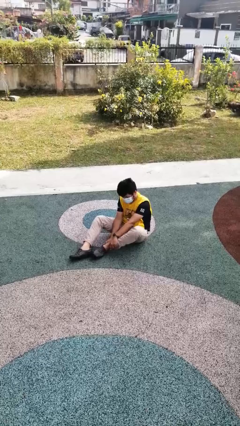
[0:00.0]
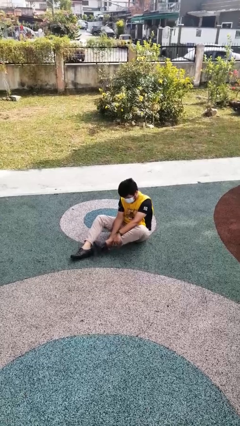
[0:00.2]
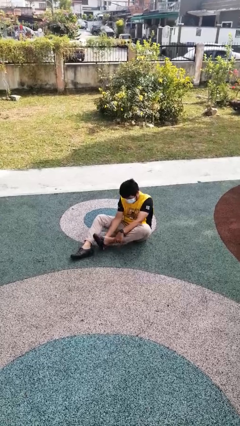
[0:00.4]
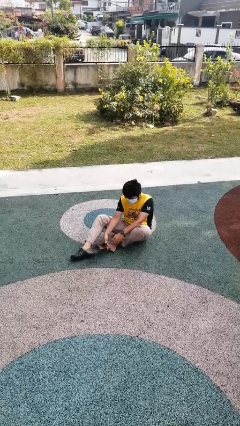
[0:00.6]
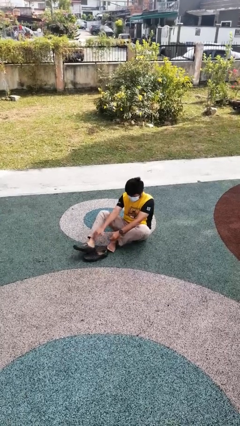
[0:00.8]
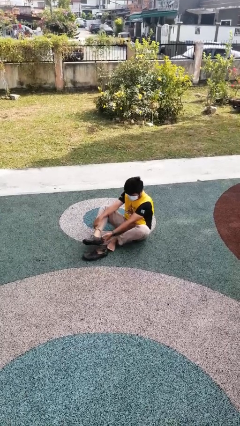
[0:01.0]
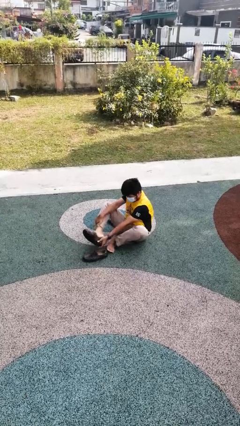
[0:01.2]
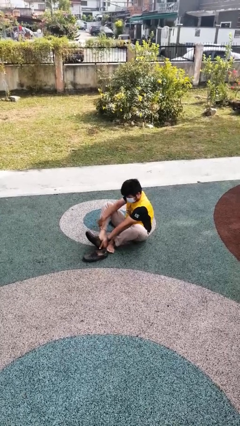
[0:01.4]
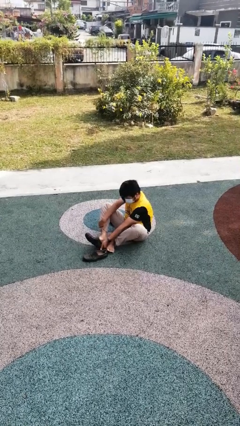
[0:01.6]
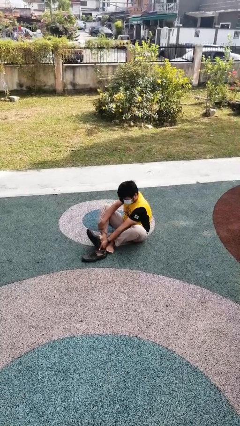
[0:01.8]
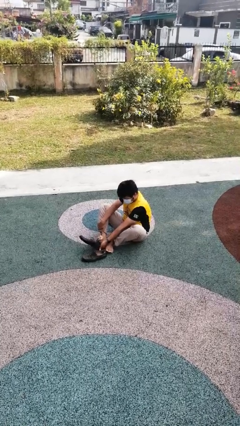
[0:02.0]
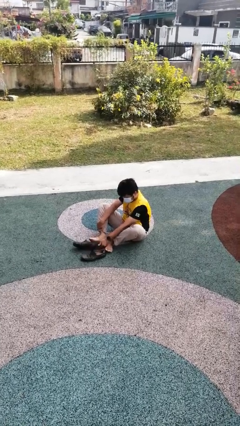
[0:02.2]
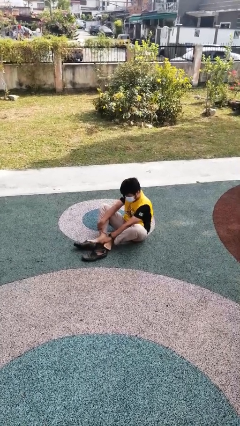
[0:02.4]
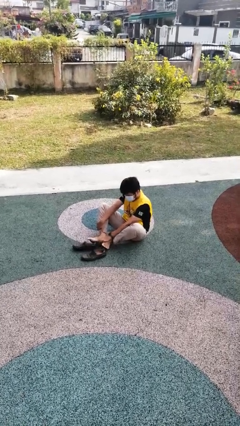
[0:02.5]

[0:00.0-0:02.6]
person takes off shoes

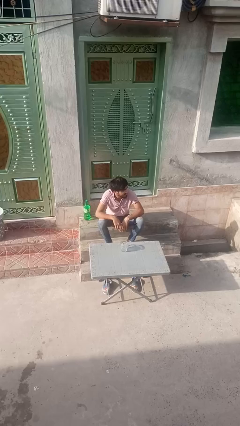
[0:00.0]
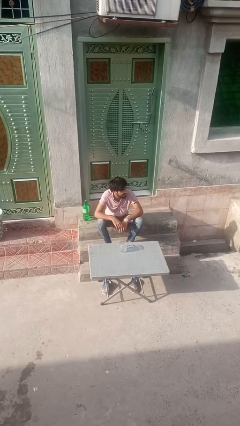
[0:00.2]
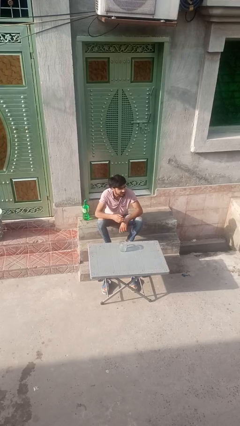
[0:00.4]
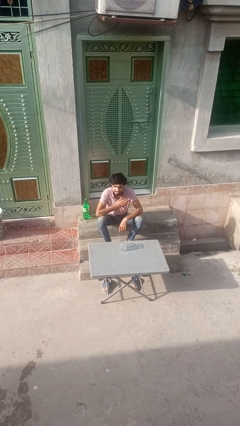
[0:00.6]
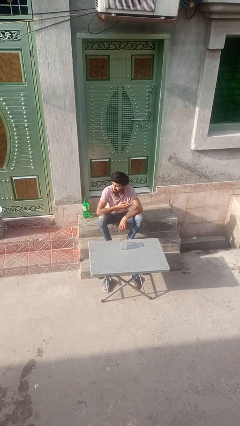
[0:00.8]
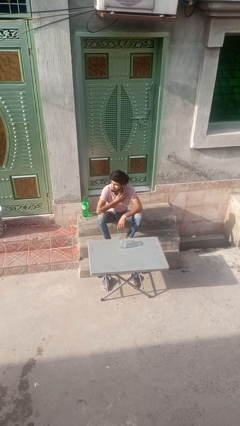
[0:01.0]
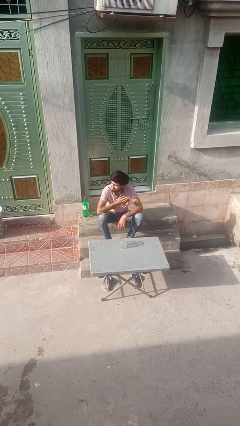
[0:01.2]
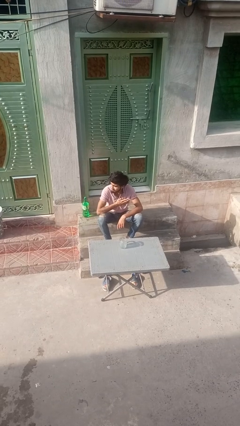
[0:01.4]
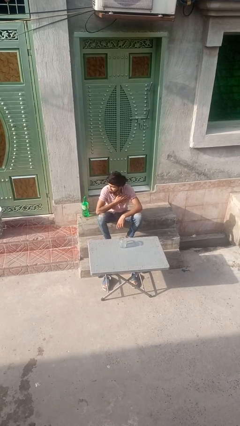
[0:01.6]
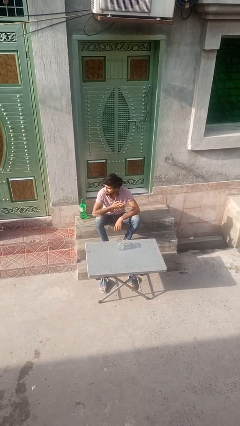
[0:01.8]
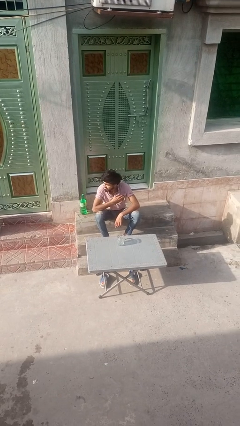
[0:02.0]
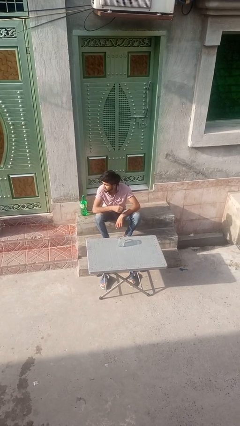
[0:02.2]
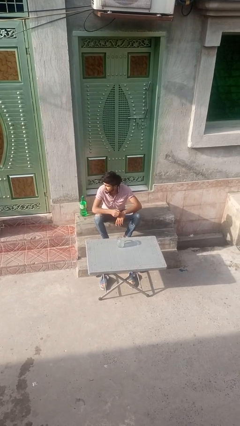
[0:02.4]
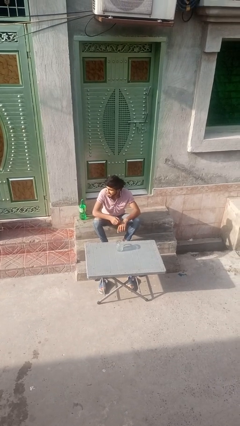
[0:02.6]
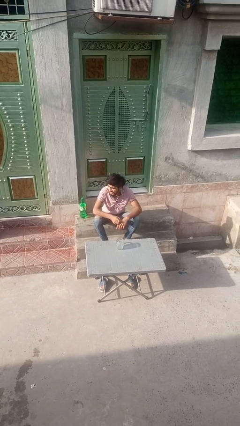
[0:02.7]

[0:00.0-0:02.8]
person drums on chest

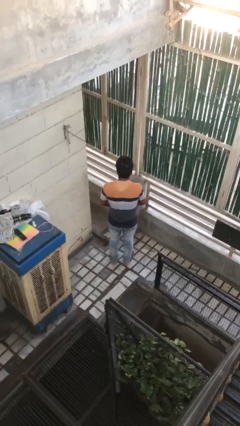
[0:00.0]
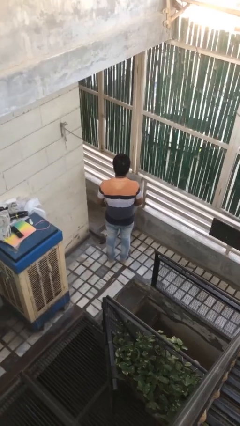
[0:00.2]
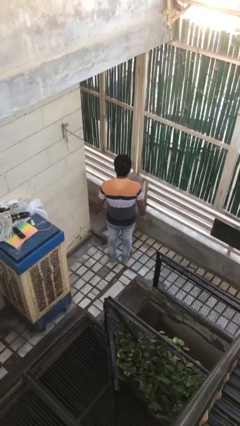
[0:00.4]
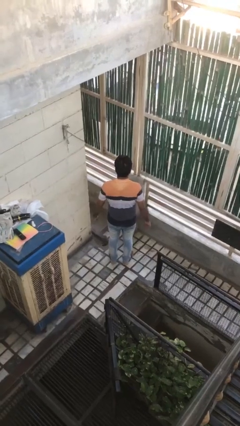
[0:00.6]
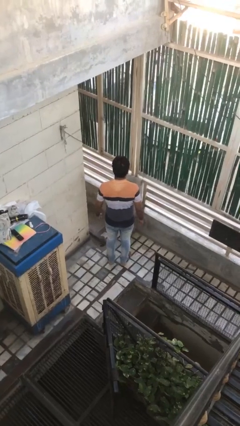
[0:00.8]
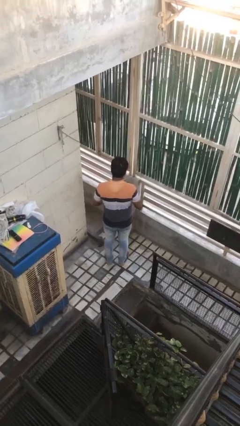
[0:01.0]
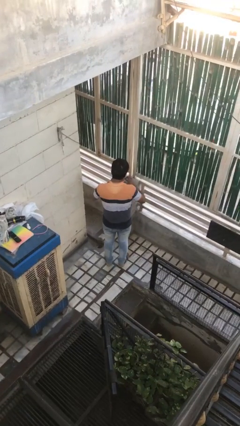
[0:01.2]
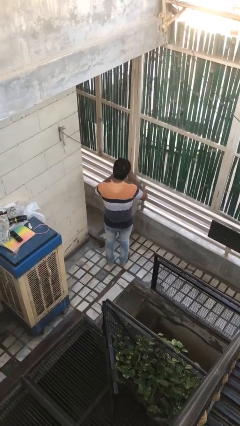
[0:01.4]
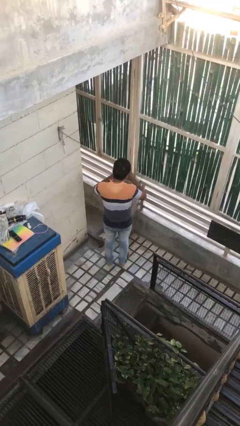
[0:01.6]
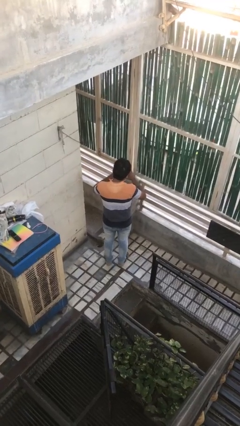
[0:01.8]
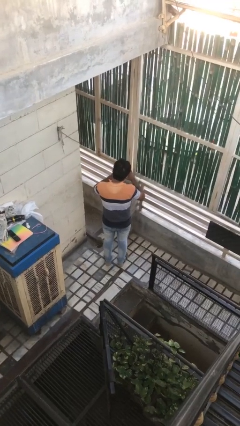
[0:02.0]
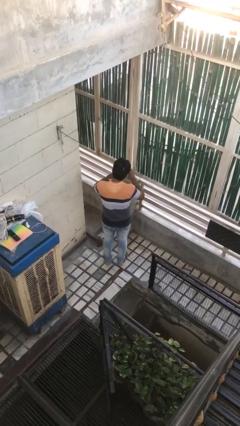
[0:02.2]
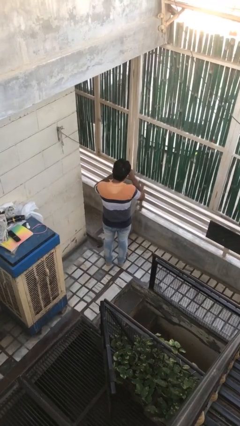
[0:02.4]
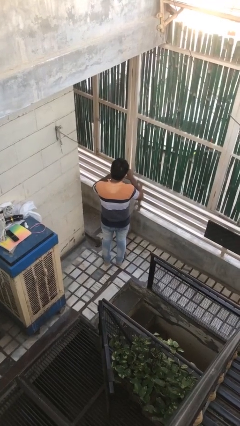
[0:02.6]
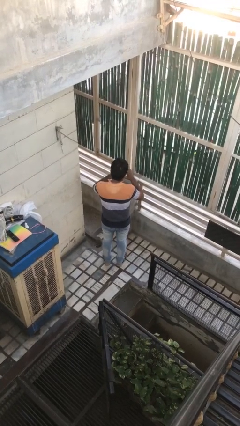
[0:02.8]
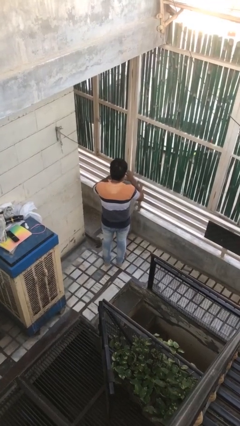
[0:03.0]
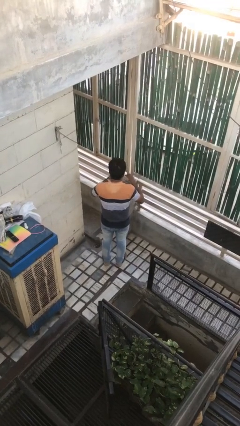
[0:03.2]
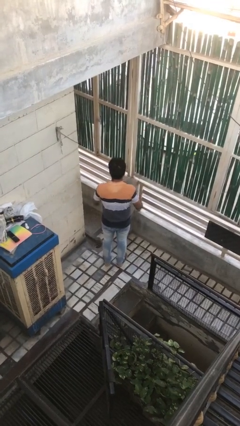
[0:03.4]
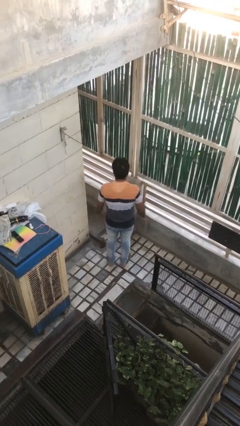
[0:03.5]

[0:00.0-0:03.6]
person files fingernails

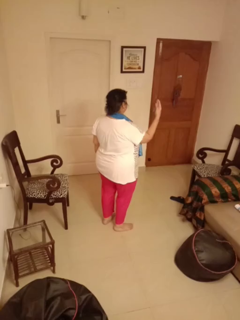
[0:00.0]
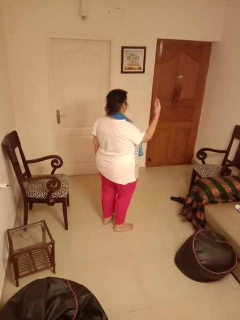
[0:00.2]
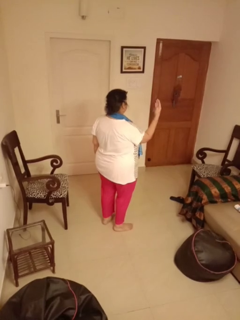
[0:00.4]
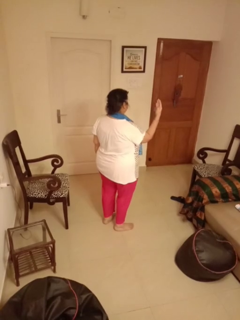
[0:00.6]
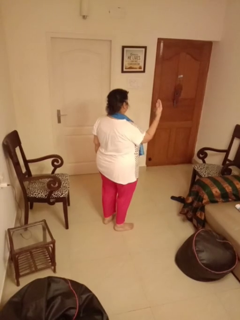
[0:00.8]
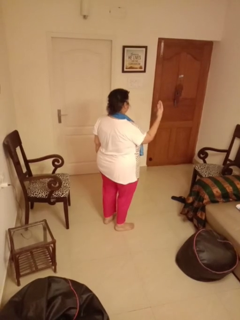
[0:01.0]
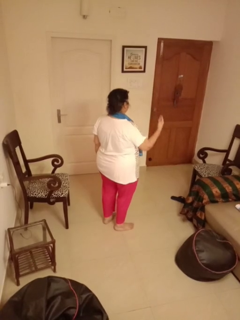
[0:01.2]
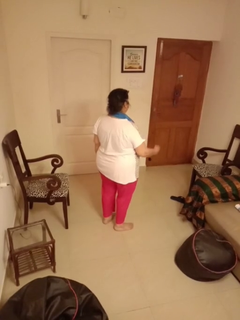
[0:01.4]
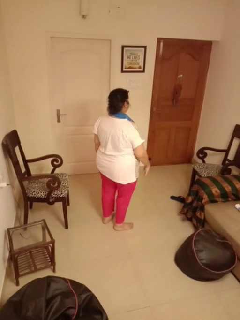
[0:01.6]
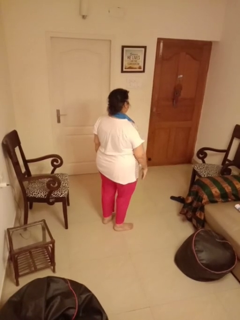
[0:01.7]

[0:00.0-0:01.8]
person gestures number four

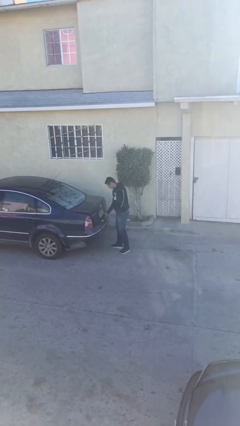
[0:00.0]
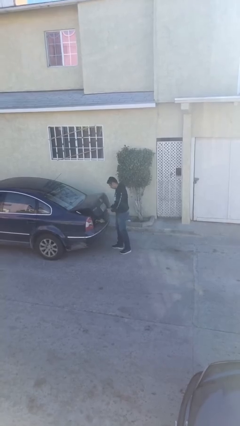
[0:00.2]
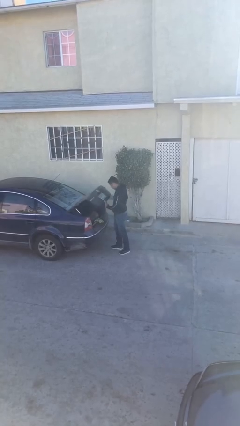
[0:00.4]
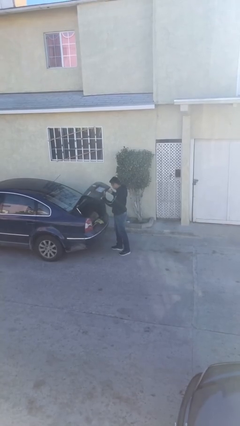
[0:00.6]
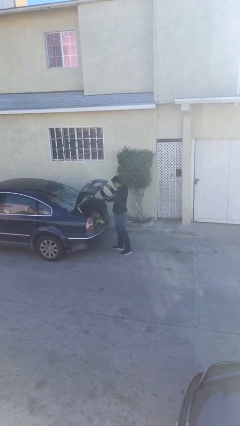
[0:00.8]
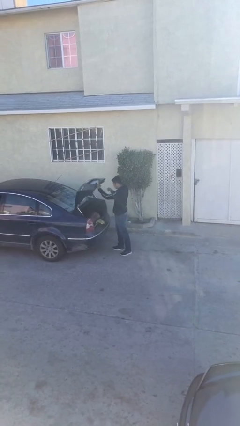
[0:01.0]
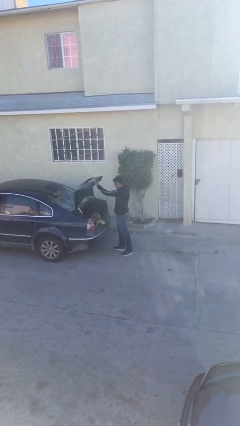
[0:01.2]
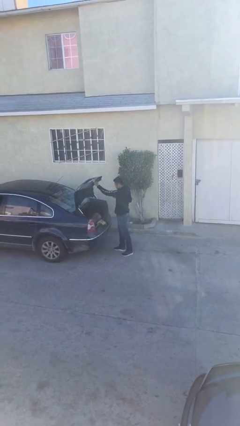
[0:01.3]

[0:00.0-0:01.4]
person opens car trunk

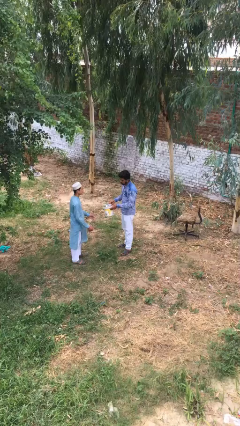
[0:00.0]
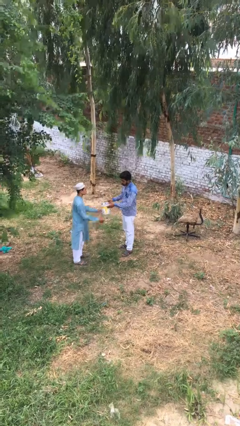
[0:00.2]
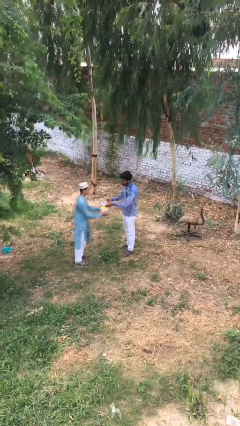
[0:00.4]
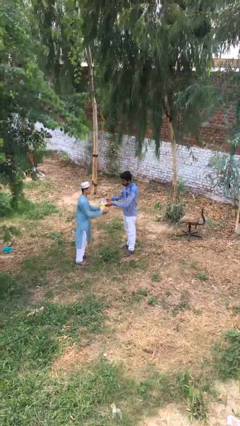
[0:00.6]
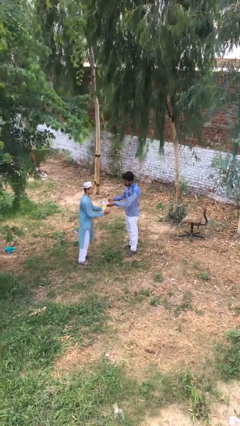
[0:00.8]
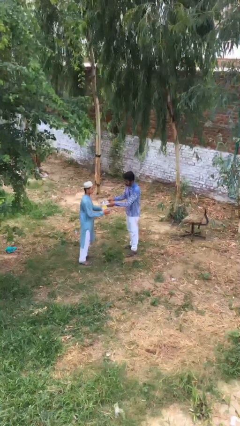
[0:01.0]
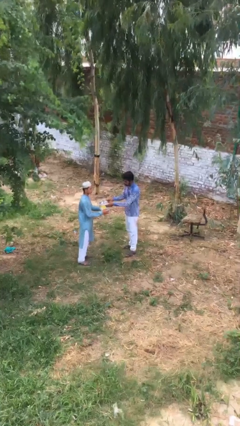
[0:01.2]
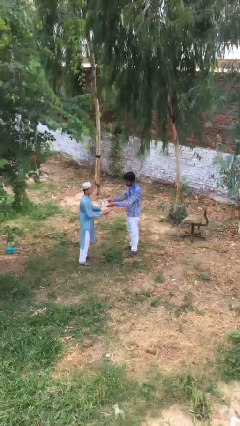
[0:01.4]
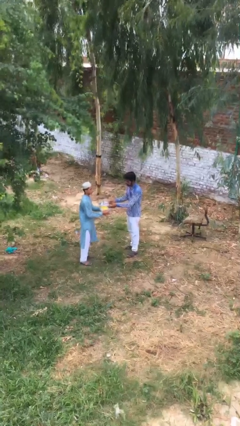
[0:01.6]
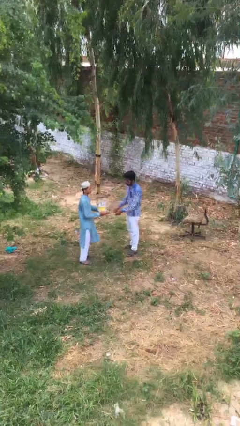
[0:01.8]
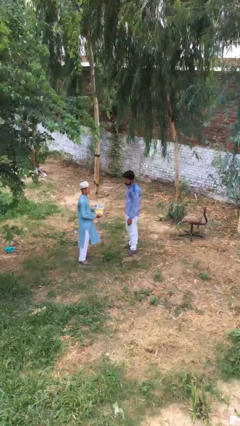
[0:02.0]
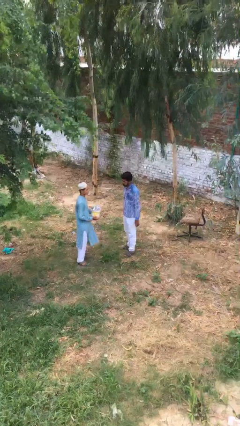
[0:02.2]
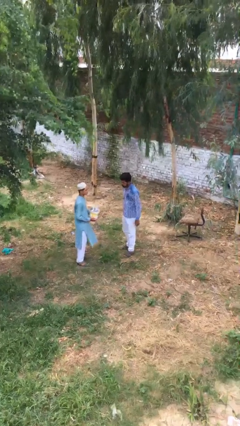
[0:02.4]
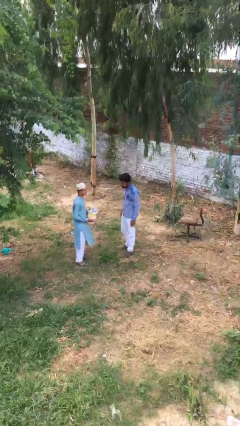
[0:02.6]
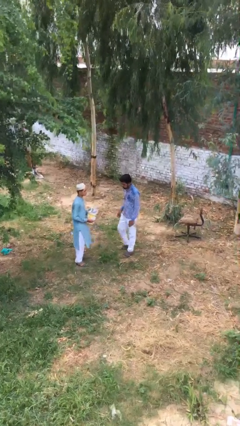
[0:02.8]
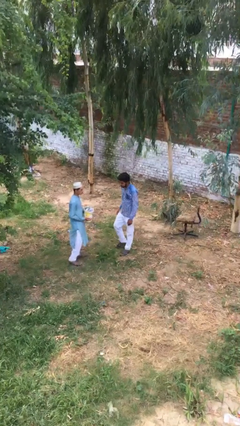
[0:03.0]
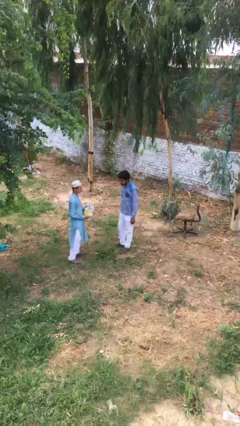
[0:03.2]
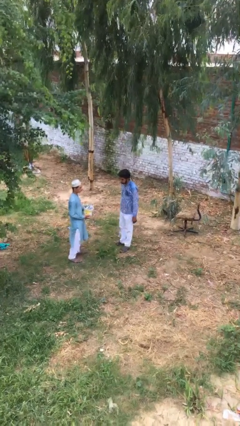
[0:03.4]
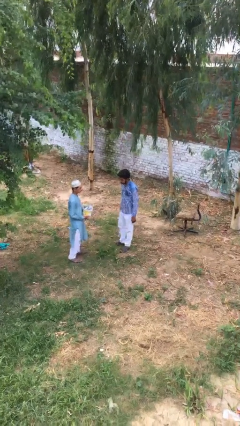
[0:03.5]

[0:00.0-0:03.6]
person transfers object to person

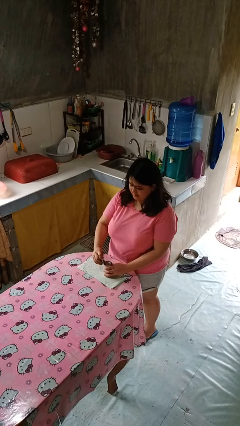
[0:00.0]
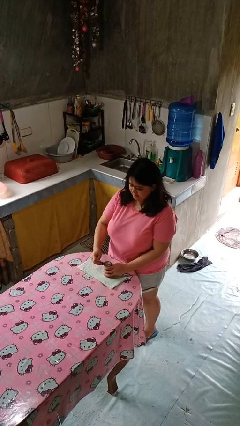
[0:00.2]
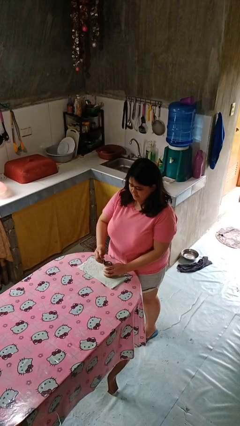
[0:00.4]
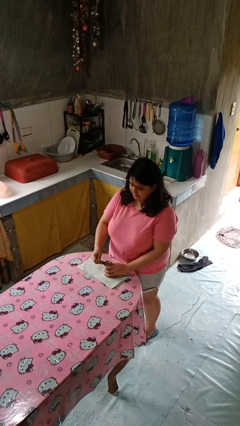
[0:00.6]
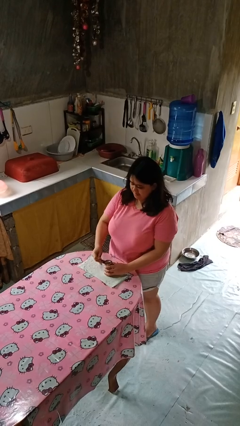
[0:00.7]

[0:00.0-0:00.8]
person opens can with can opener

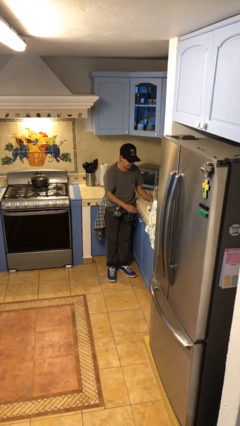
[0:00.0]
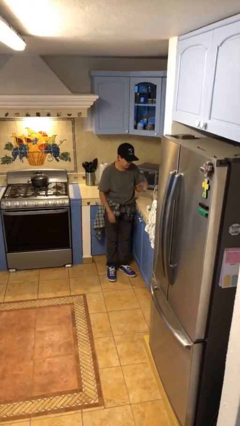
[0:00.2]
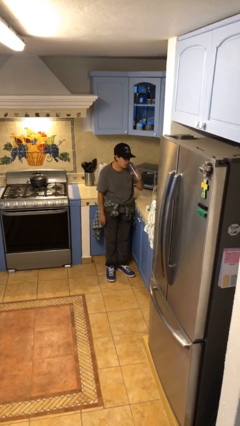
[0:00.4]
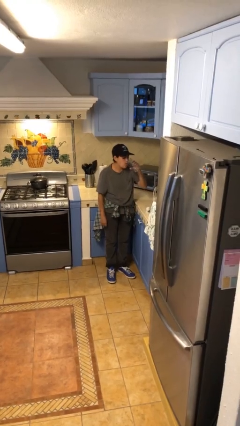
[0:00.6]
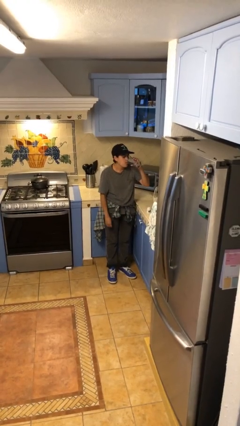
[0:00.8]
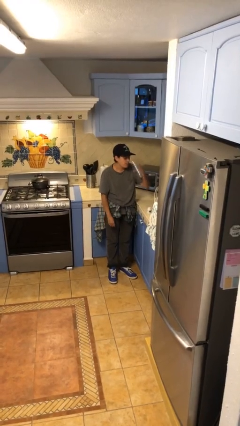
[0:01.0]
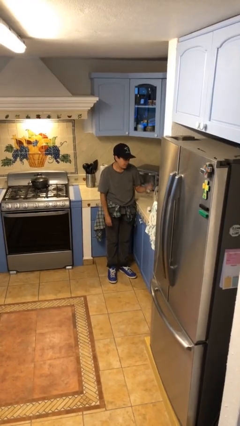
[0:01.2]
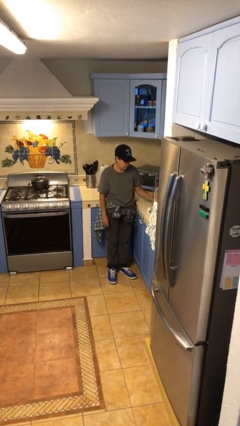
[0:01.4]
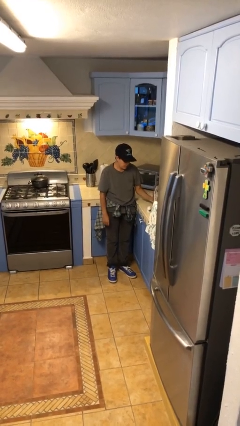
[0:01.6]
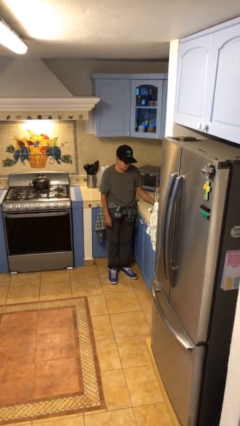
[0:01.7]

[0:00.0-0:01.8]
person drinks from cup
